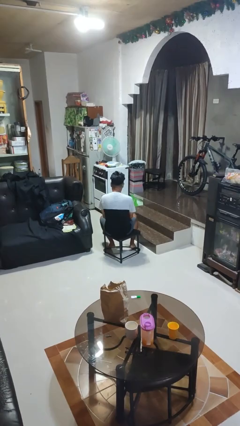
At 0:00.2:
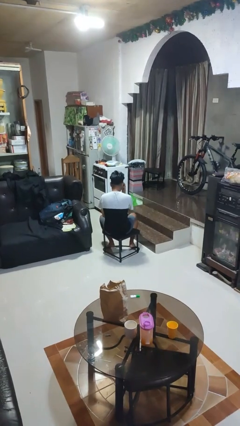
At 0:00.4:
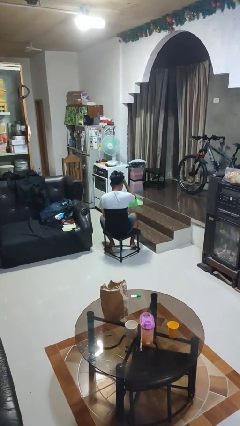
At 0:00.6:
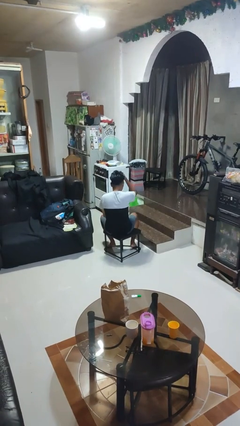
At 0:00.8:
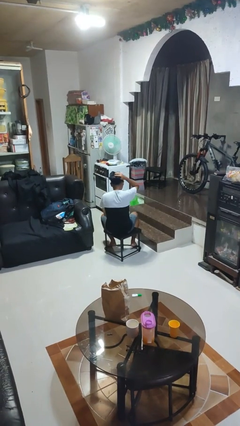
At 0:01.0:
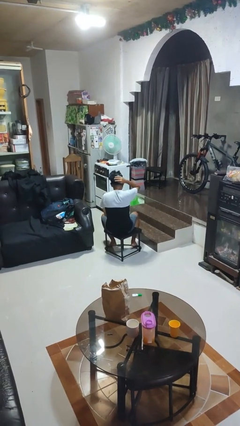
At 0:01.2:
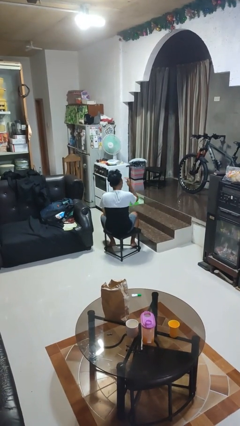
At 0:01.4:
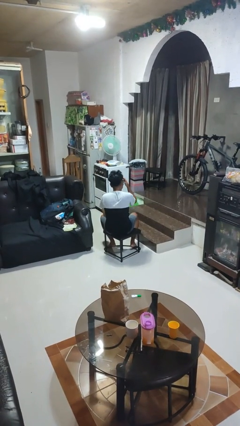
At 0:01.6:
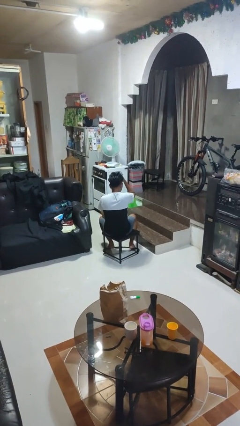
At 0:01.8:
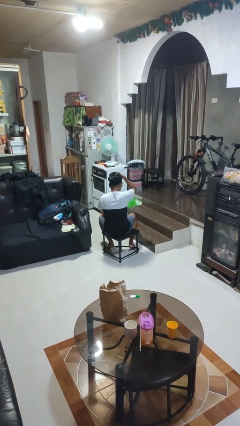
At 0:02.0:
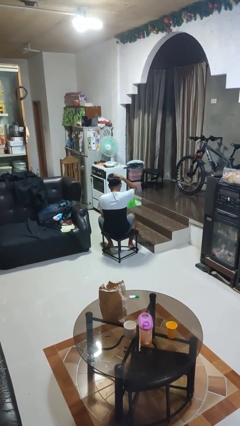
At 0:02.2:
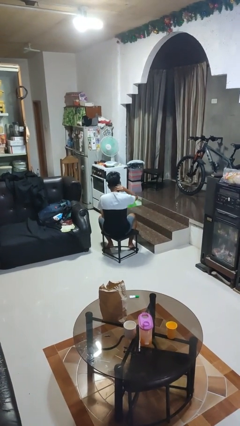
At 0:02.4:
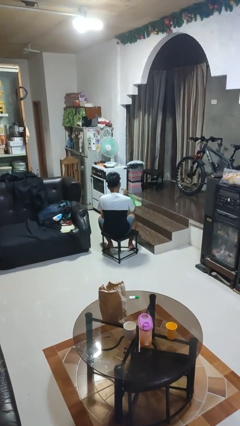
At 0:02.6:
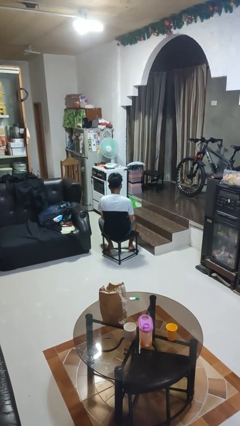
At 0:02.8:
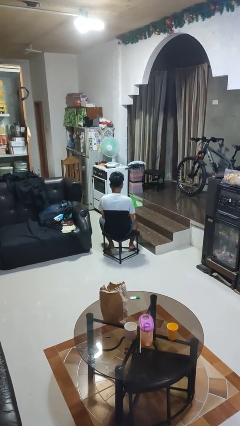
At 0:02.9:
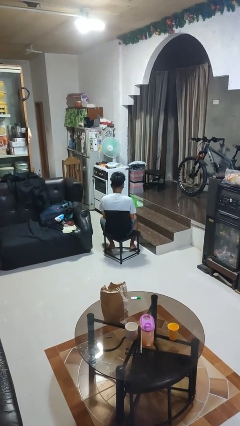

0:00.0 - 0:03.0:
person strokes hair

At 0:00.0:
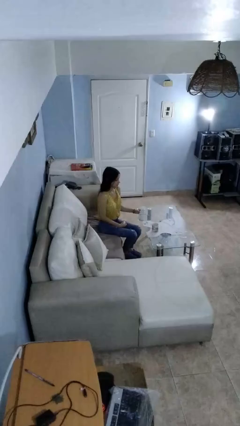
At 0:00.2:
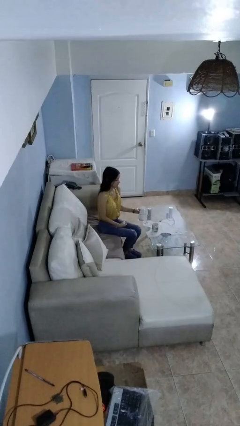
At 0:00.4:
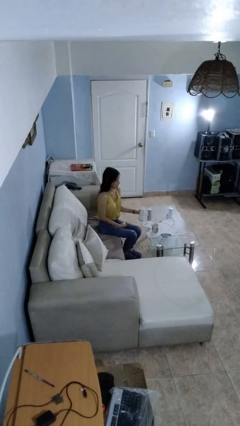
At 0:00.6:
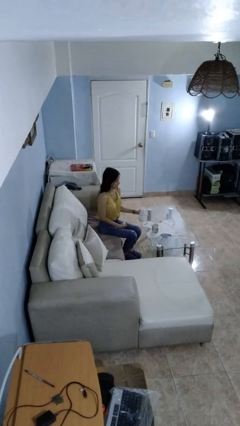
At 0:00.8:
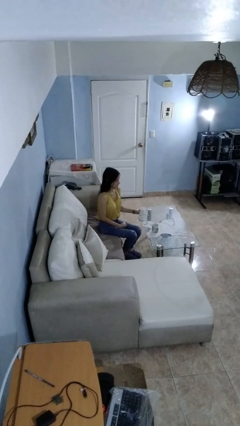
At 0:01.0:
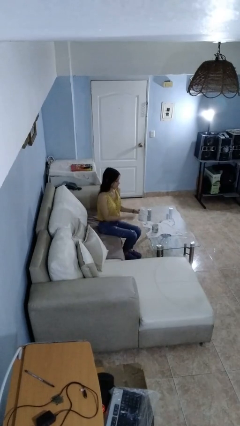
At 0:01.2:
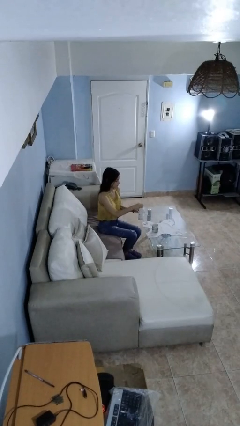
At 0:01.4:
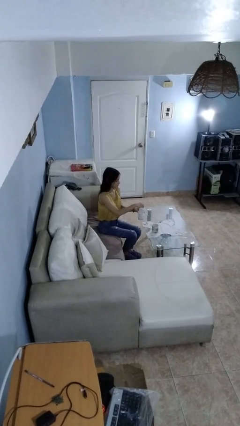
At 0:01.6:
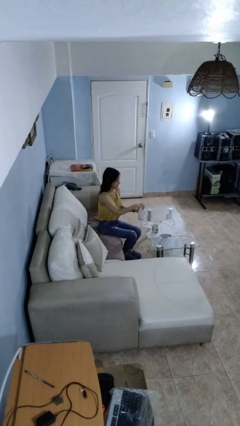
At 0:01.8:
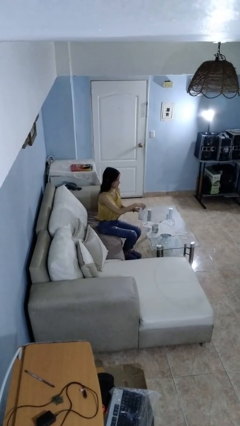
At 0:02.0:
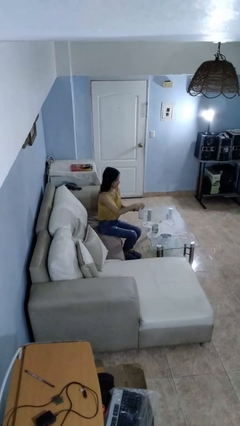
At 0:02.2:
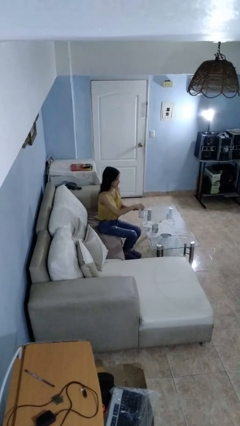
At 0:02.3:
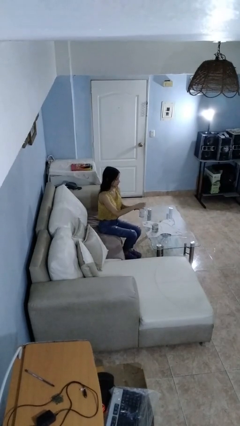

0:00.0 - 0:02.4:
person screws lid to bottle

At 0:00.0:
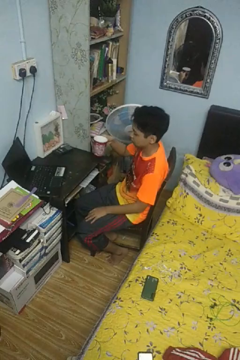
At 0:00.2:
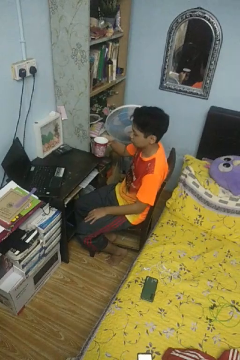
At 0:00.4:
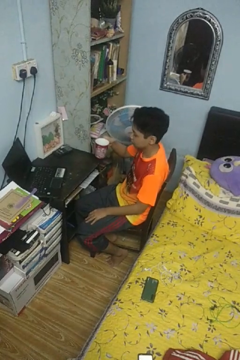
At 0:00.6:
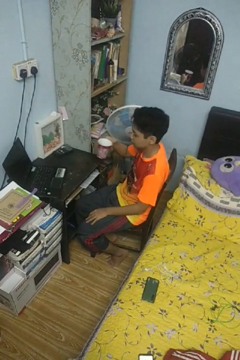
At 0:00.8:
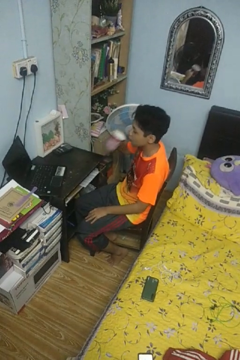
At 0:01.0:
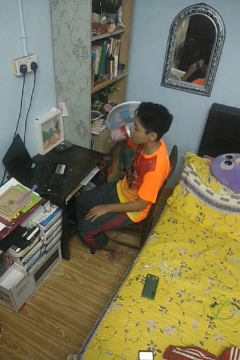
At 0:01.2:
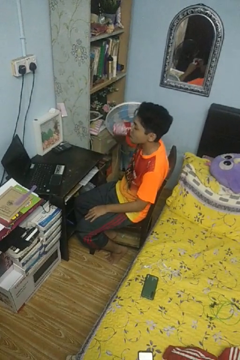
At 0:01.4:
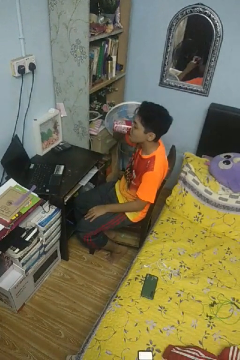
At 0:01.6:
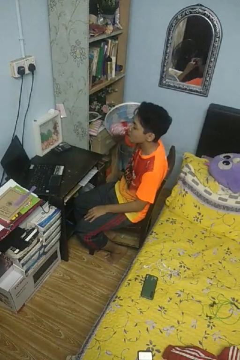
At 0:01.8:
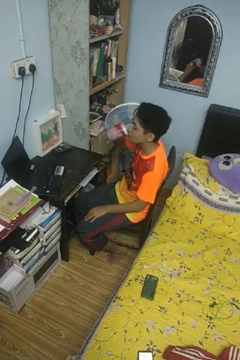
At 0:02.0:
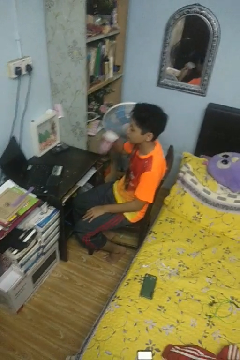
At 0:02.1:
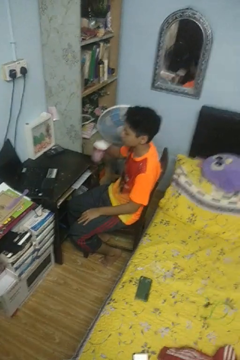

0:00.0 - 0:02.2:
person closes refrigerator

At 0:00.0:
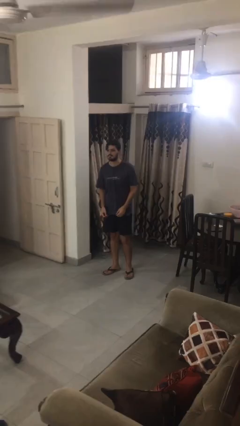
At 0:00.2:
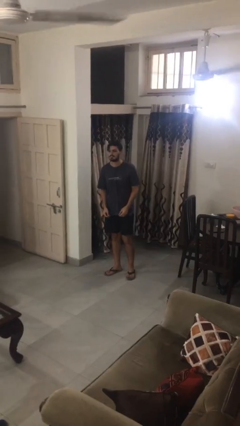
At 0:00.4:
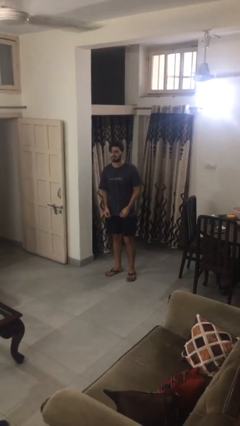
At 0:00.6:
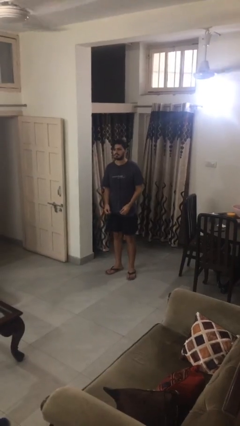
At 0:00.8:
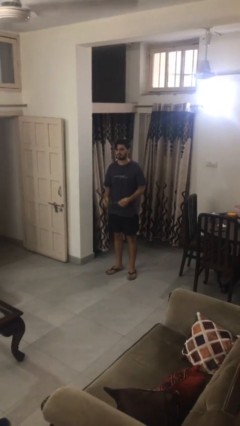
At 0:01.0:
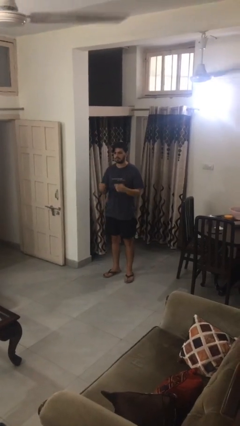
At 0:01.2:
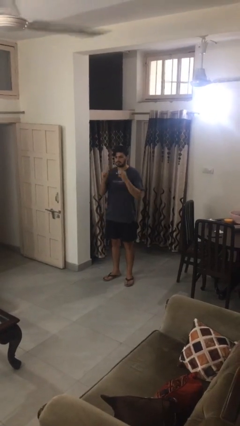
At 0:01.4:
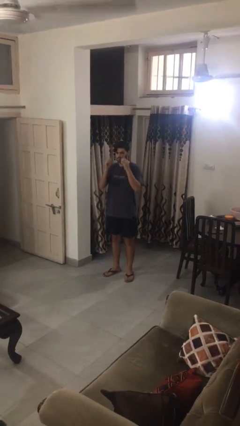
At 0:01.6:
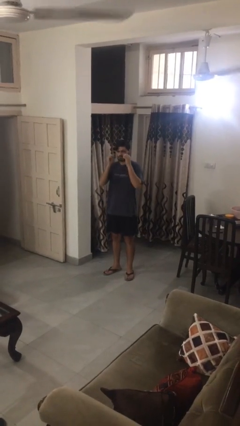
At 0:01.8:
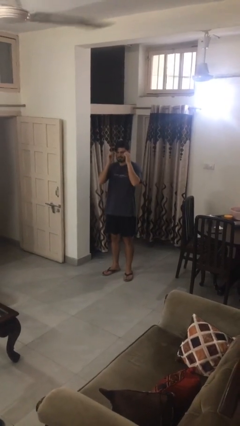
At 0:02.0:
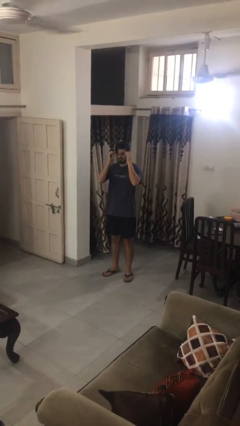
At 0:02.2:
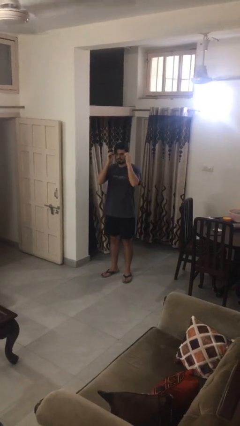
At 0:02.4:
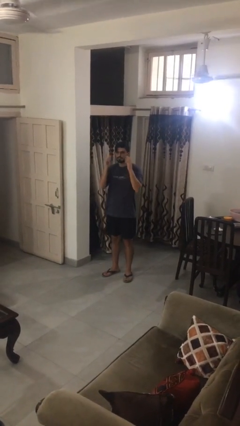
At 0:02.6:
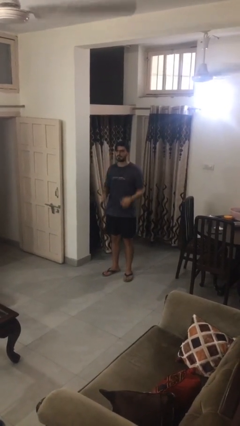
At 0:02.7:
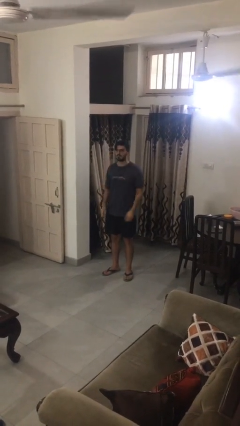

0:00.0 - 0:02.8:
person puts on glasses

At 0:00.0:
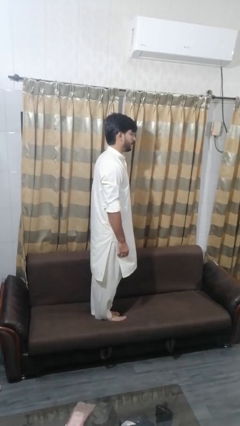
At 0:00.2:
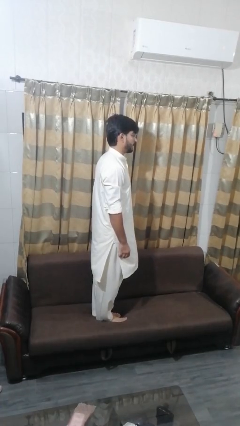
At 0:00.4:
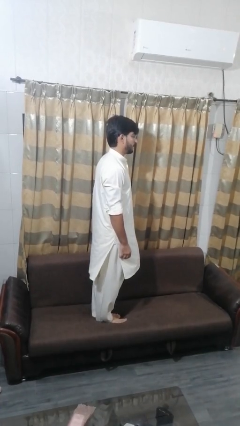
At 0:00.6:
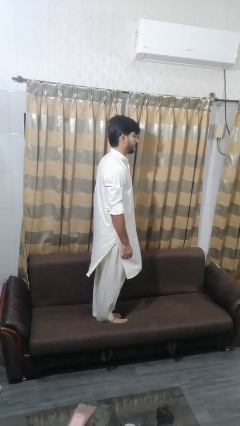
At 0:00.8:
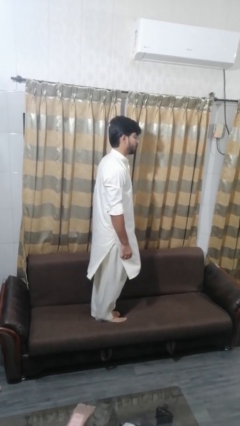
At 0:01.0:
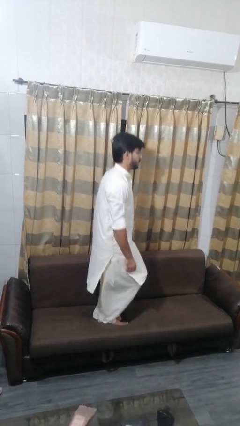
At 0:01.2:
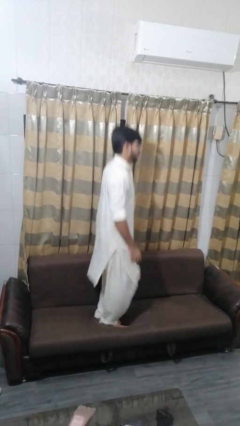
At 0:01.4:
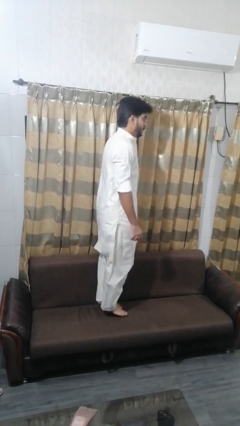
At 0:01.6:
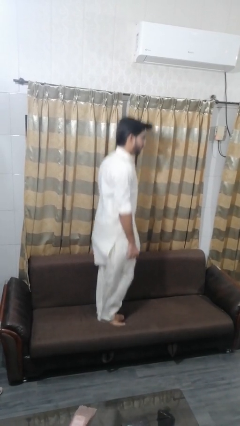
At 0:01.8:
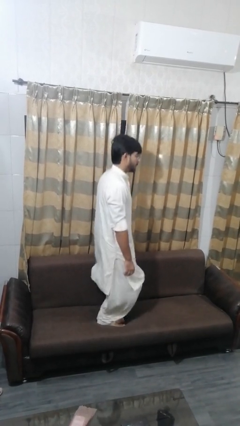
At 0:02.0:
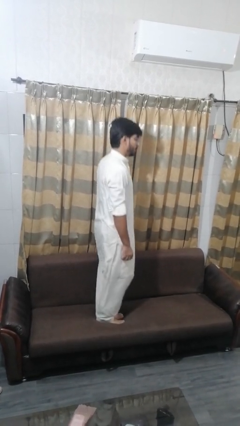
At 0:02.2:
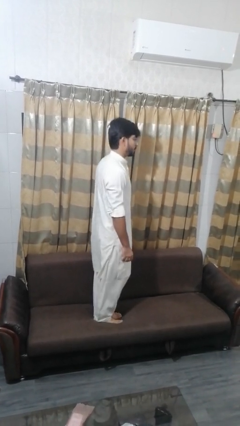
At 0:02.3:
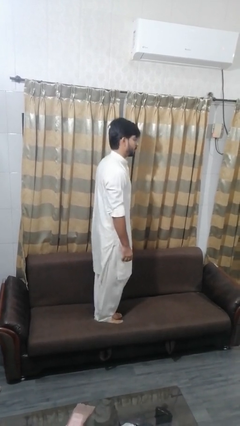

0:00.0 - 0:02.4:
person jumps on couch

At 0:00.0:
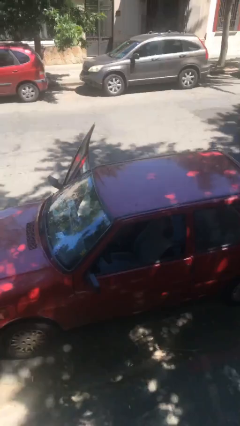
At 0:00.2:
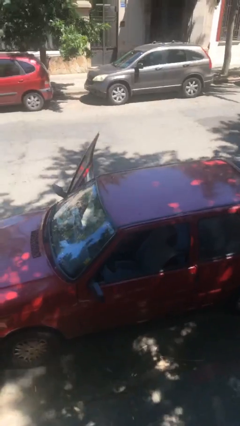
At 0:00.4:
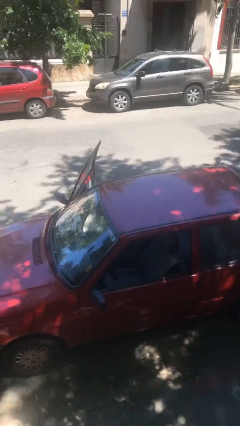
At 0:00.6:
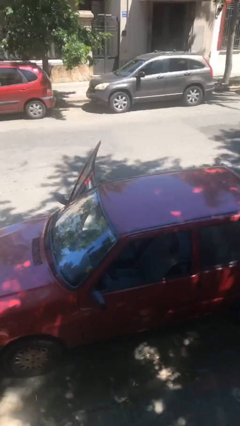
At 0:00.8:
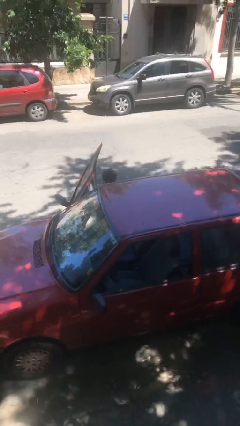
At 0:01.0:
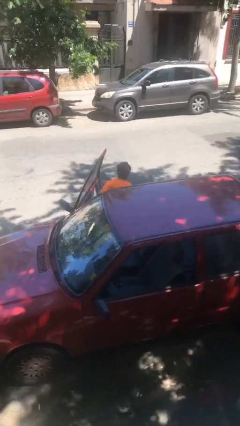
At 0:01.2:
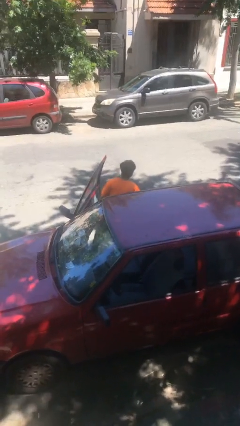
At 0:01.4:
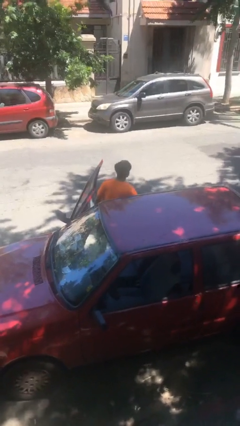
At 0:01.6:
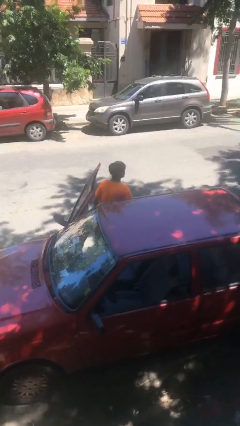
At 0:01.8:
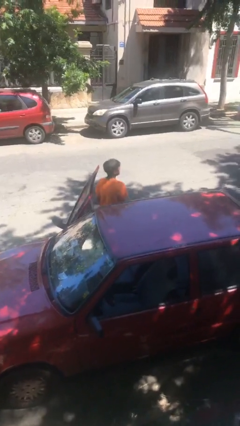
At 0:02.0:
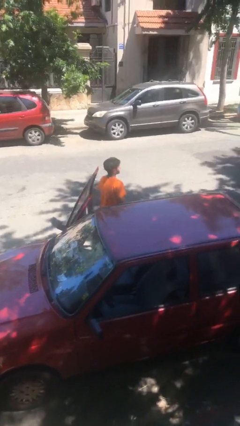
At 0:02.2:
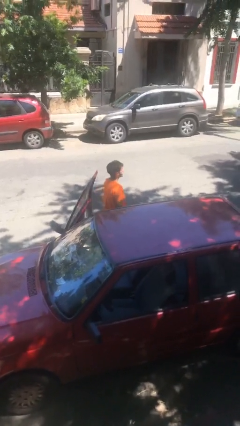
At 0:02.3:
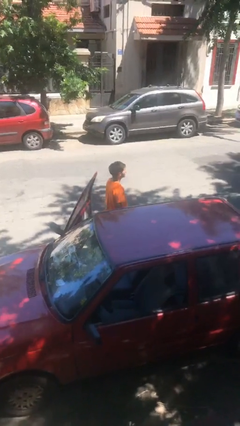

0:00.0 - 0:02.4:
person exits car

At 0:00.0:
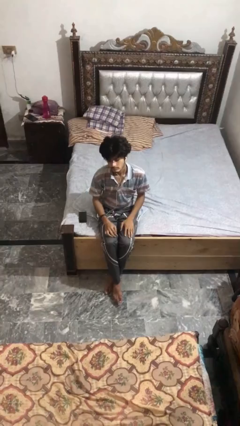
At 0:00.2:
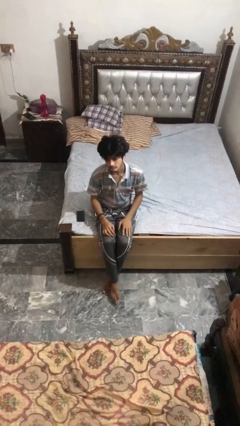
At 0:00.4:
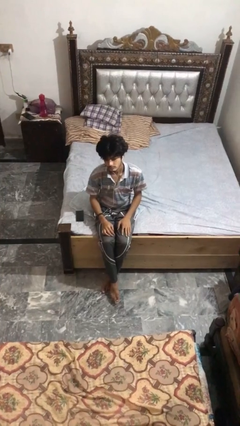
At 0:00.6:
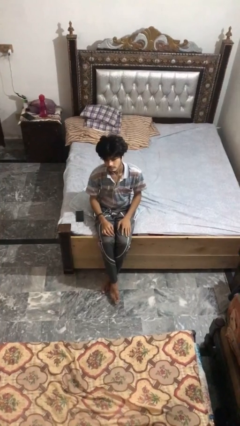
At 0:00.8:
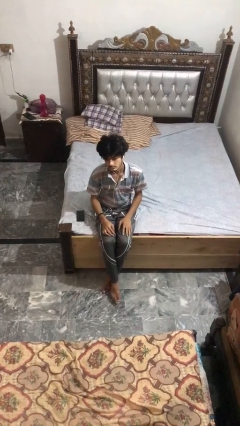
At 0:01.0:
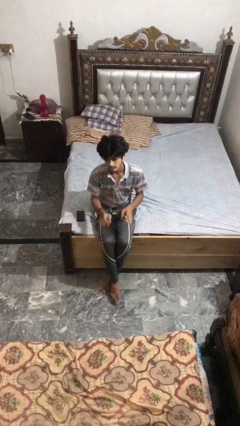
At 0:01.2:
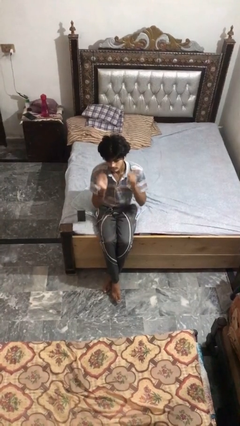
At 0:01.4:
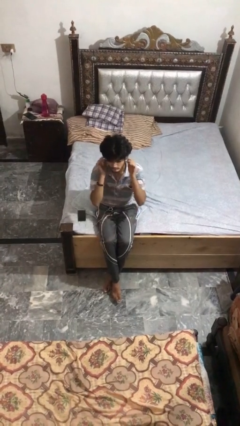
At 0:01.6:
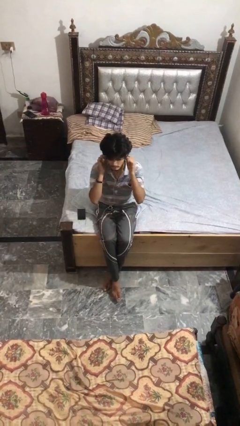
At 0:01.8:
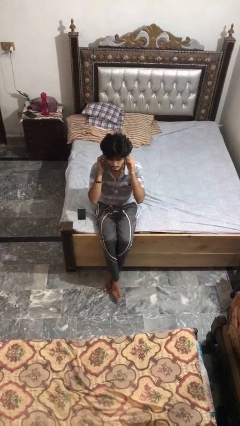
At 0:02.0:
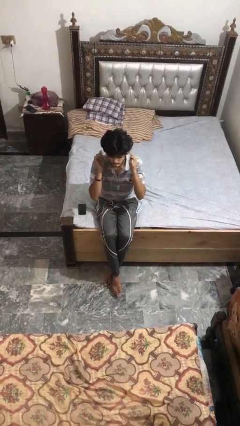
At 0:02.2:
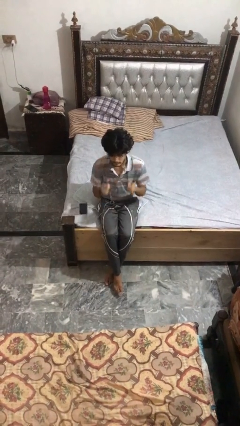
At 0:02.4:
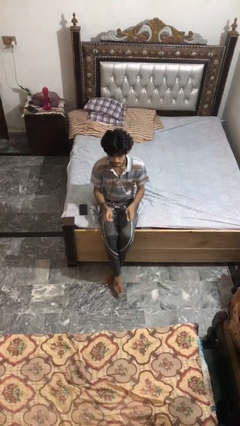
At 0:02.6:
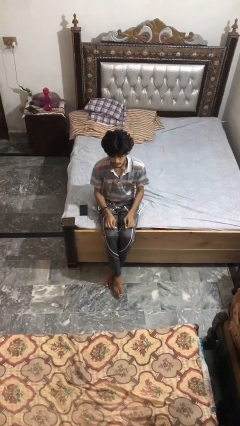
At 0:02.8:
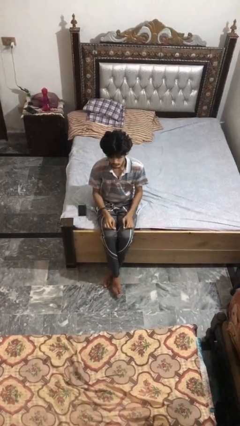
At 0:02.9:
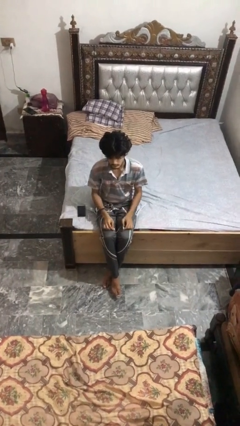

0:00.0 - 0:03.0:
person takes off headphones
